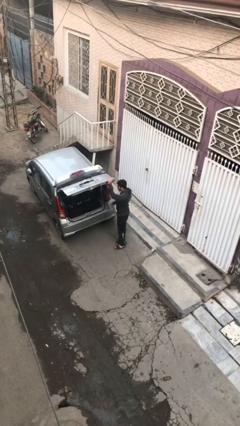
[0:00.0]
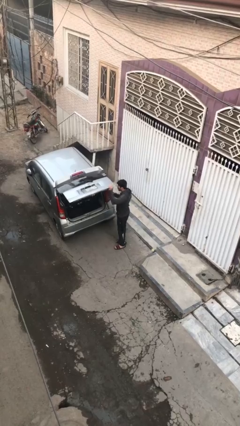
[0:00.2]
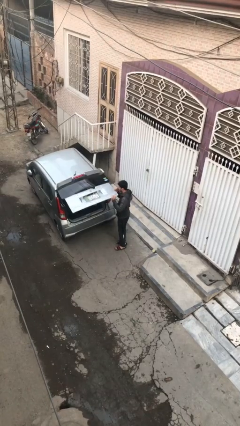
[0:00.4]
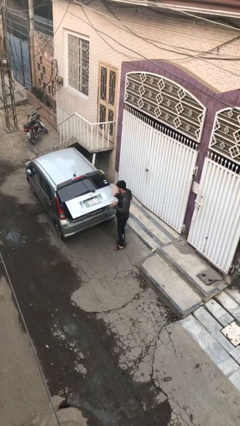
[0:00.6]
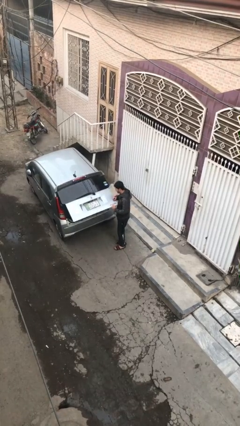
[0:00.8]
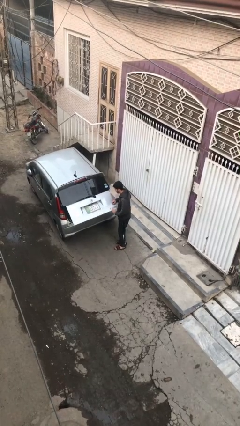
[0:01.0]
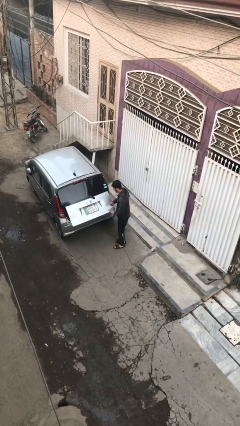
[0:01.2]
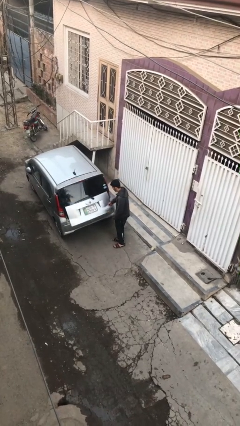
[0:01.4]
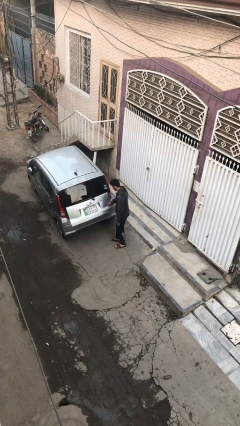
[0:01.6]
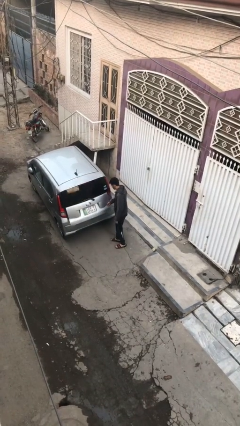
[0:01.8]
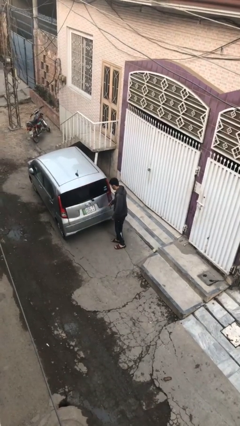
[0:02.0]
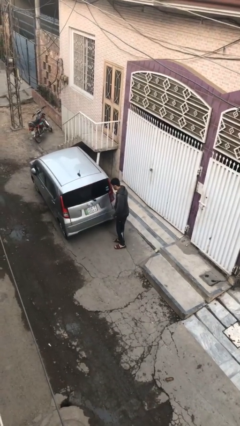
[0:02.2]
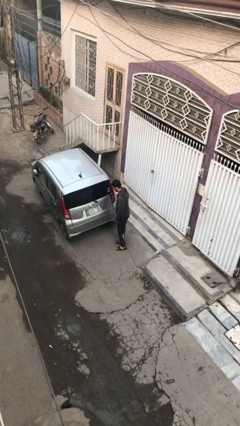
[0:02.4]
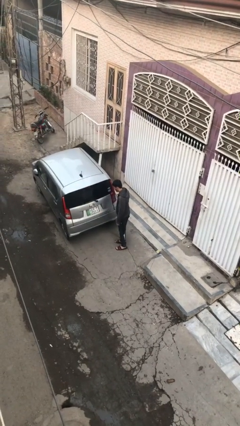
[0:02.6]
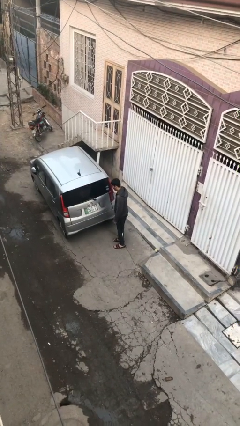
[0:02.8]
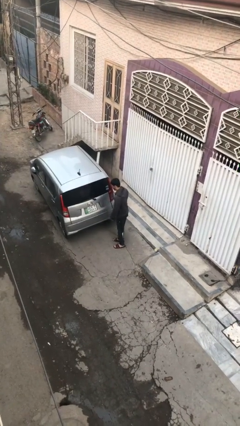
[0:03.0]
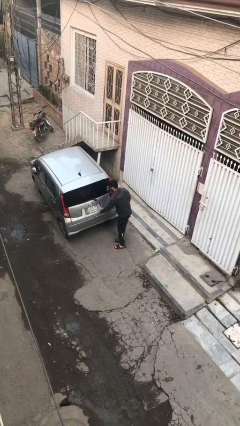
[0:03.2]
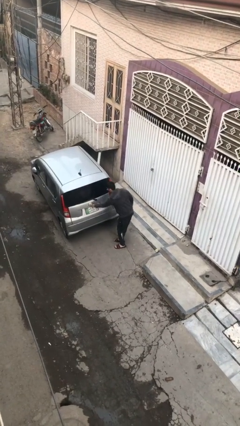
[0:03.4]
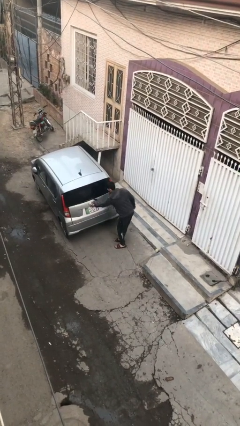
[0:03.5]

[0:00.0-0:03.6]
person closes car trunk

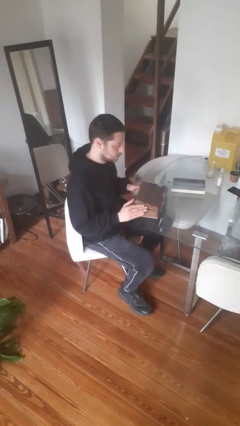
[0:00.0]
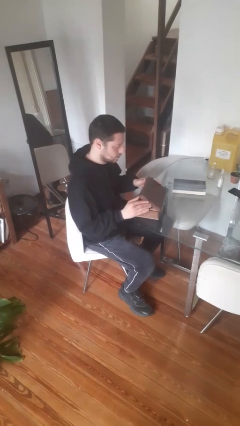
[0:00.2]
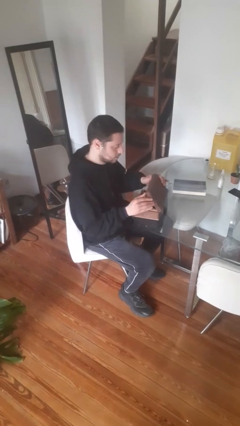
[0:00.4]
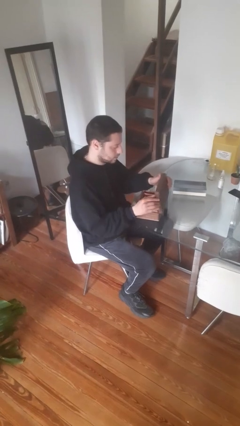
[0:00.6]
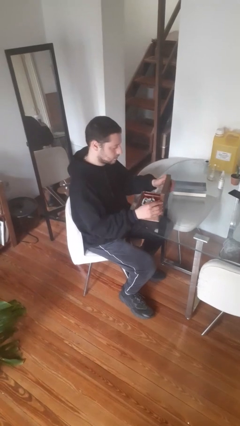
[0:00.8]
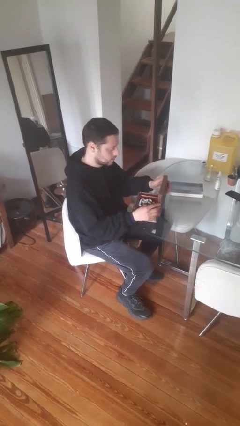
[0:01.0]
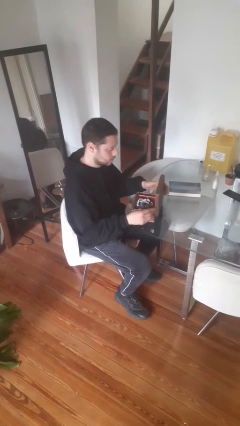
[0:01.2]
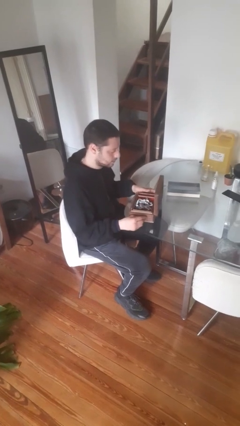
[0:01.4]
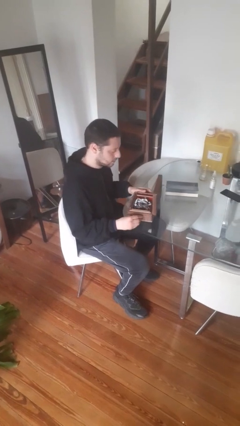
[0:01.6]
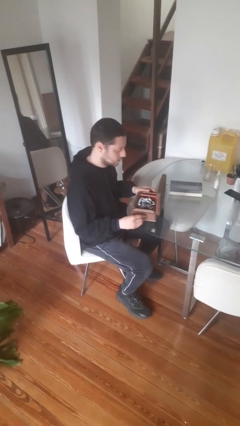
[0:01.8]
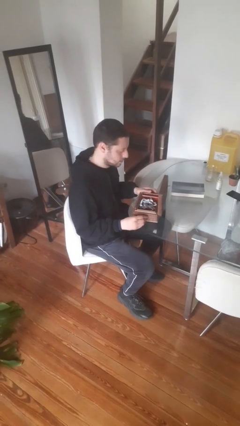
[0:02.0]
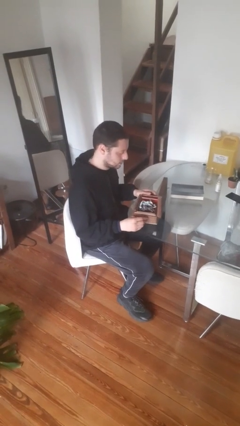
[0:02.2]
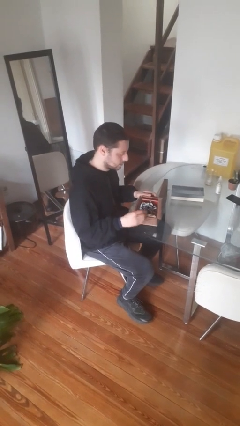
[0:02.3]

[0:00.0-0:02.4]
person opens jewelry box

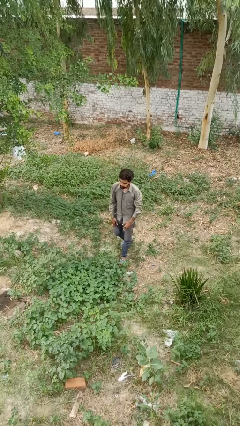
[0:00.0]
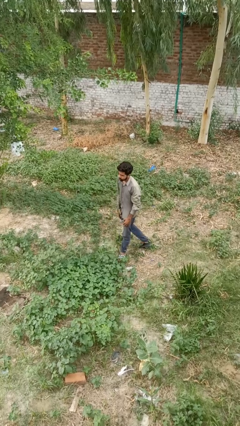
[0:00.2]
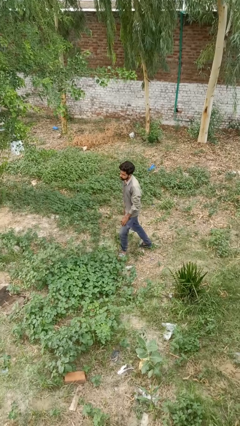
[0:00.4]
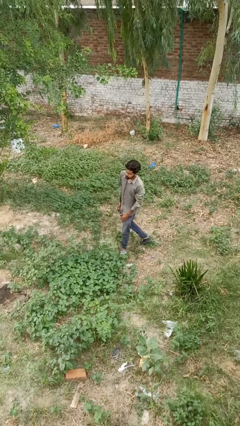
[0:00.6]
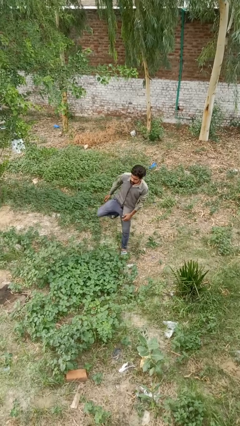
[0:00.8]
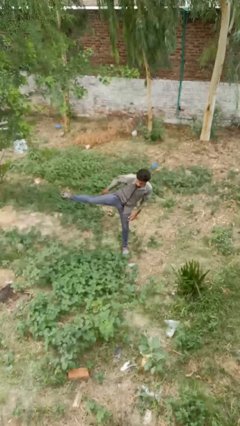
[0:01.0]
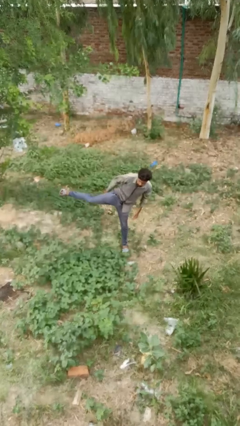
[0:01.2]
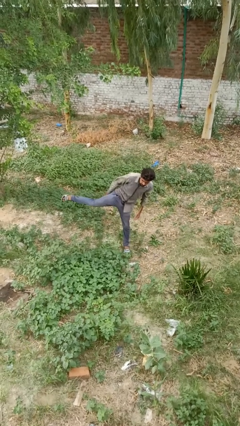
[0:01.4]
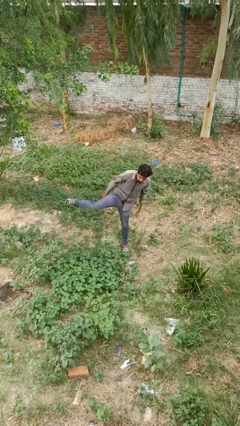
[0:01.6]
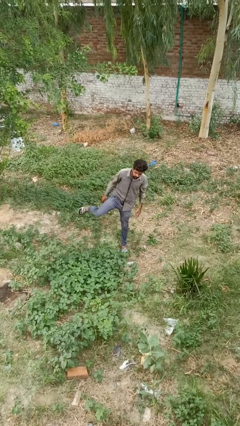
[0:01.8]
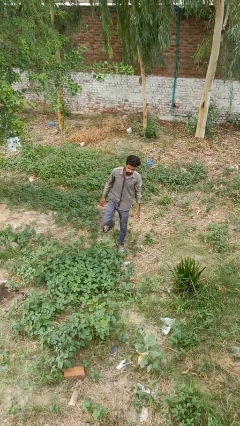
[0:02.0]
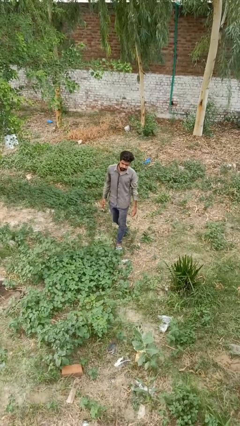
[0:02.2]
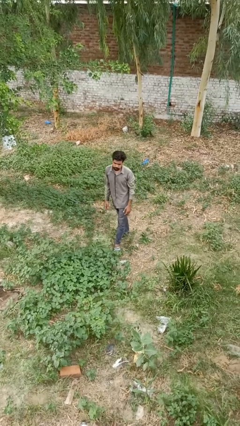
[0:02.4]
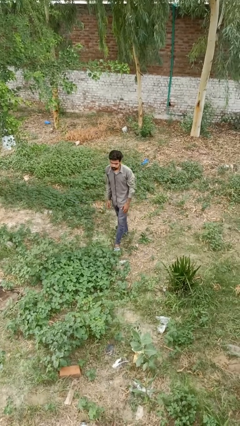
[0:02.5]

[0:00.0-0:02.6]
person karate kicks

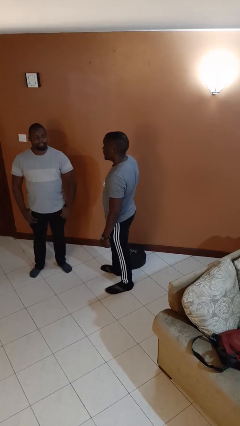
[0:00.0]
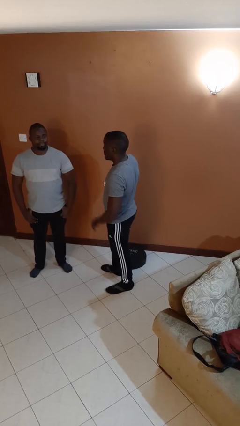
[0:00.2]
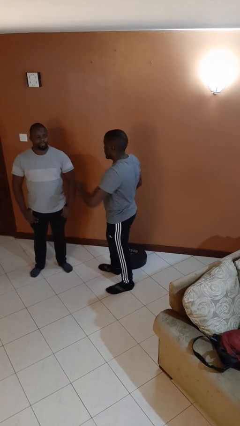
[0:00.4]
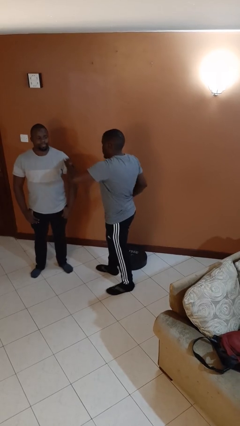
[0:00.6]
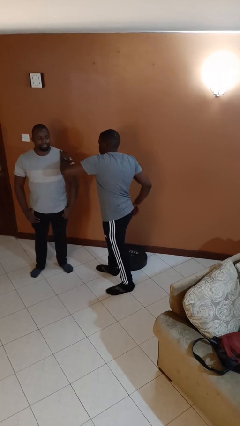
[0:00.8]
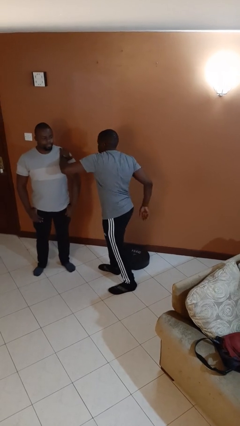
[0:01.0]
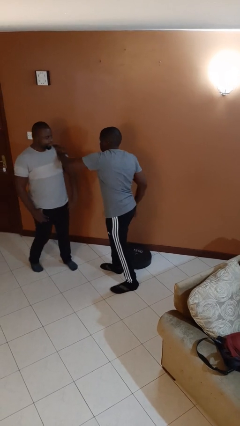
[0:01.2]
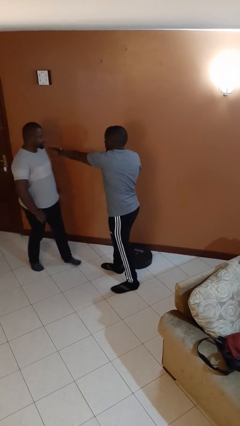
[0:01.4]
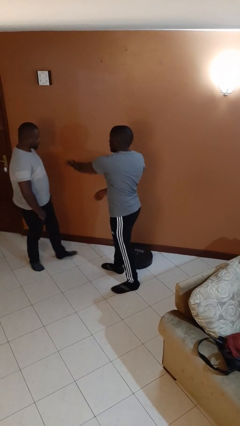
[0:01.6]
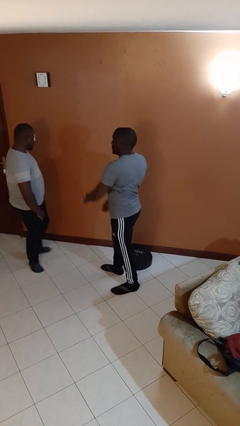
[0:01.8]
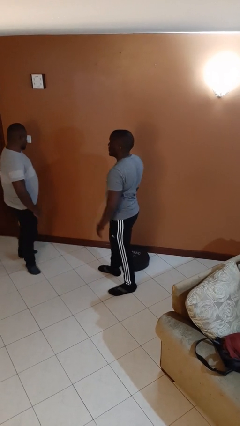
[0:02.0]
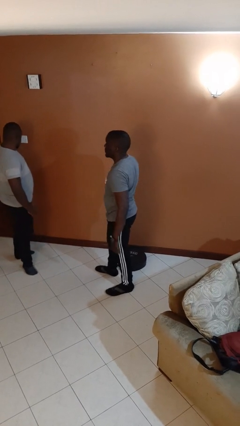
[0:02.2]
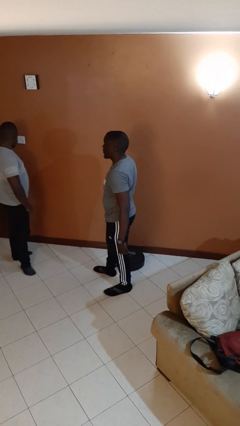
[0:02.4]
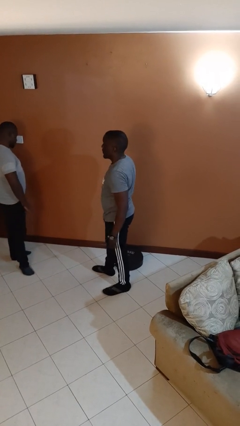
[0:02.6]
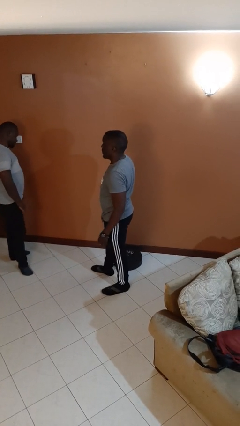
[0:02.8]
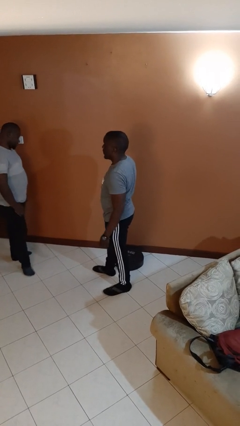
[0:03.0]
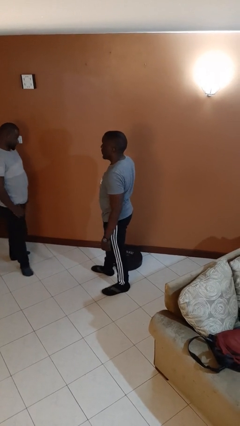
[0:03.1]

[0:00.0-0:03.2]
person shoves person

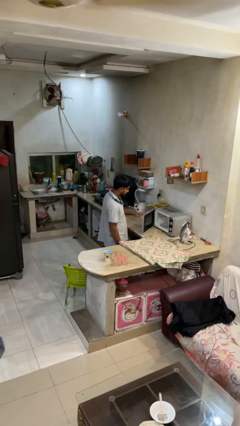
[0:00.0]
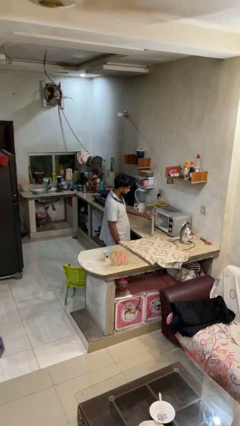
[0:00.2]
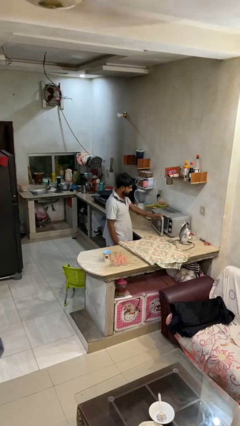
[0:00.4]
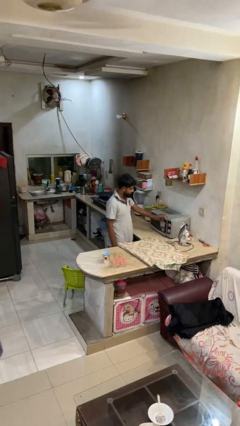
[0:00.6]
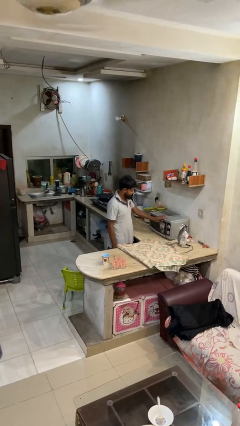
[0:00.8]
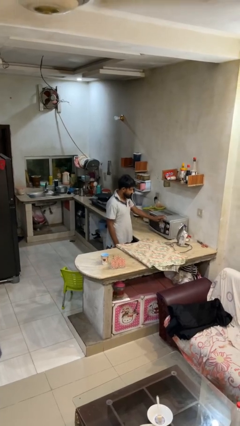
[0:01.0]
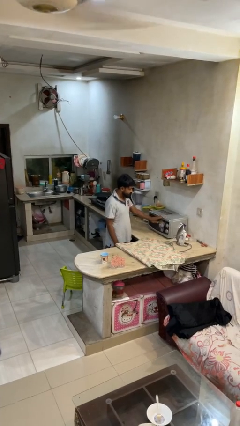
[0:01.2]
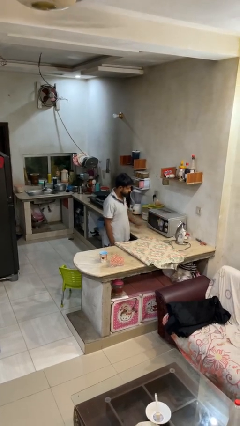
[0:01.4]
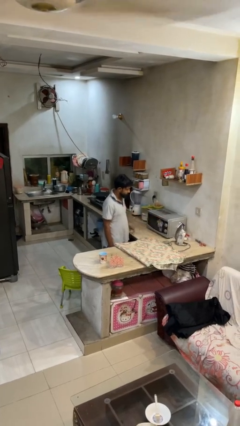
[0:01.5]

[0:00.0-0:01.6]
person closes microwave

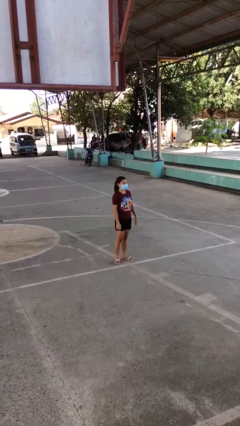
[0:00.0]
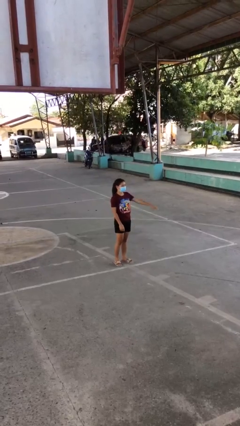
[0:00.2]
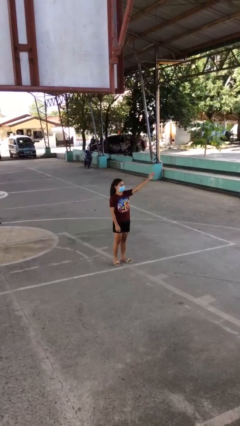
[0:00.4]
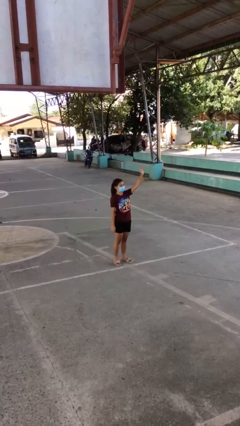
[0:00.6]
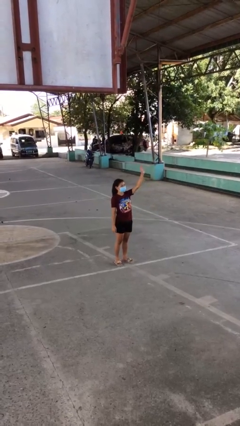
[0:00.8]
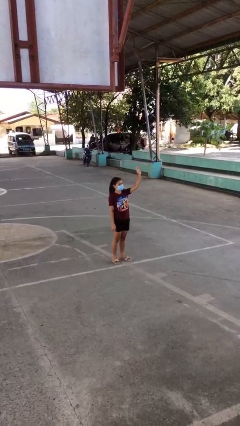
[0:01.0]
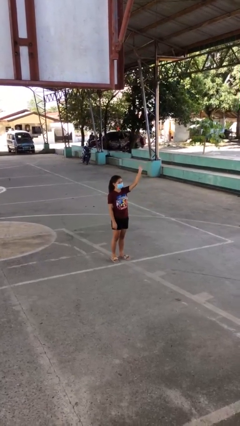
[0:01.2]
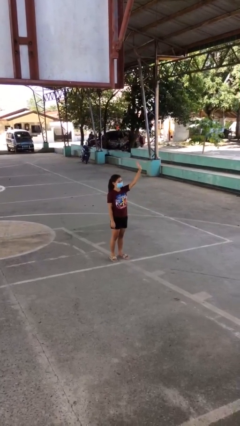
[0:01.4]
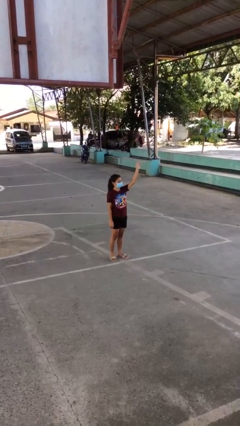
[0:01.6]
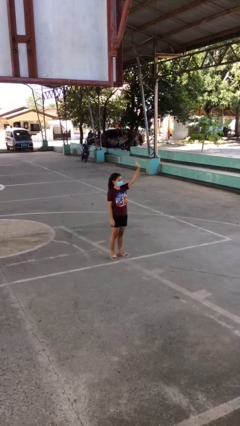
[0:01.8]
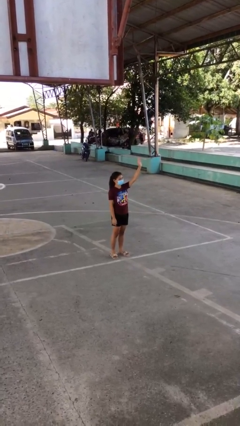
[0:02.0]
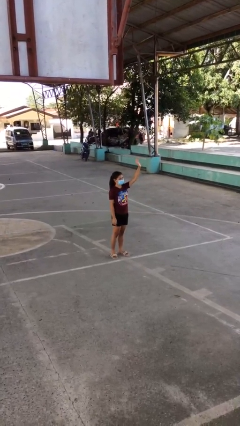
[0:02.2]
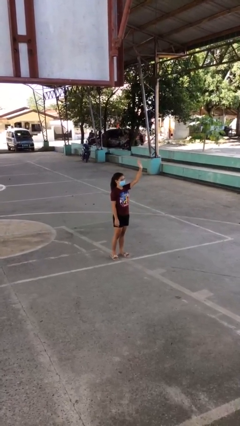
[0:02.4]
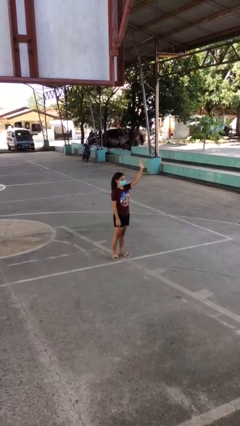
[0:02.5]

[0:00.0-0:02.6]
person waves at person

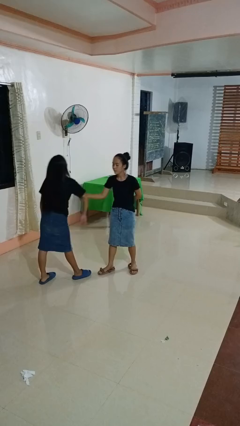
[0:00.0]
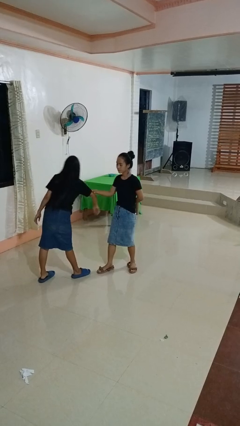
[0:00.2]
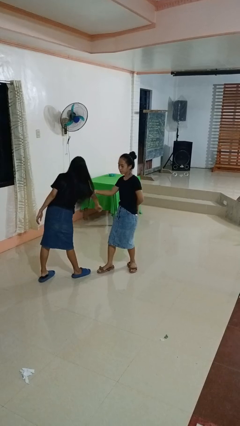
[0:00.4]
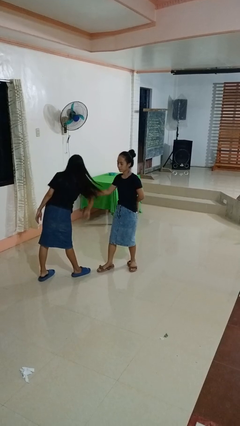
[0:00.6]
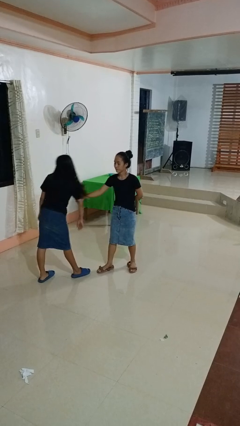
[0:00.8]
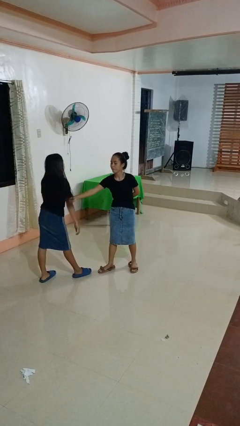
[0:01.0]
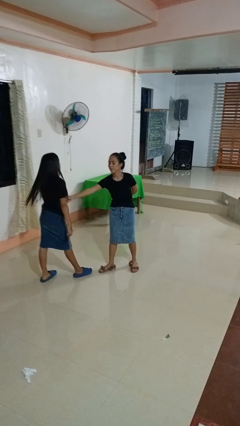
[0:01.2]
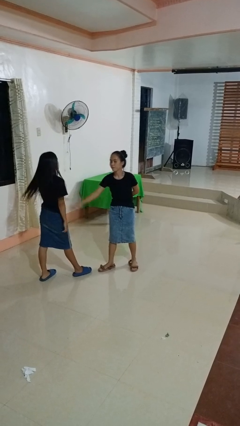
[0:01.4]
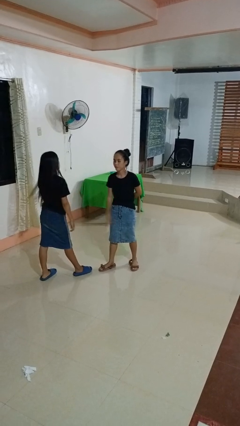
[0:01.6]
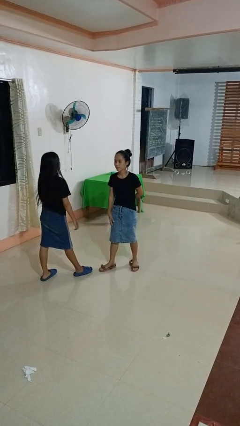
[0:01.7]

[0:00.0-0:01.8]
person grabs person by bicep
